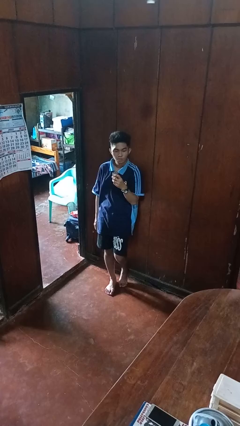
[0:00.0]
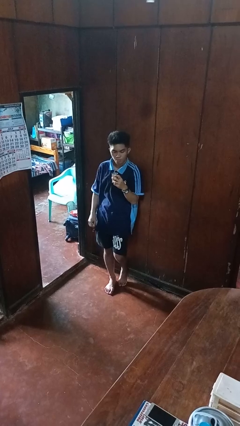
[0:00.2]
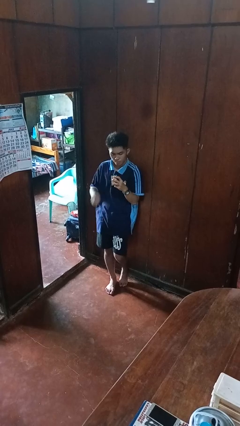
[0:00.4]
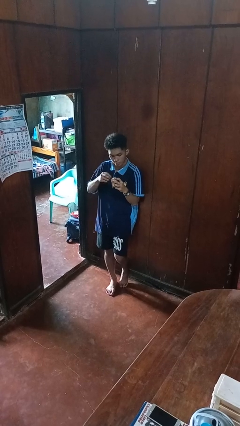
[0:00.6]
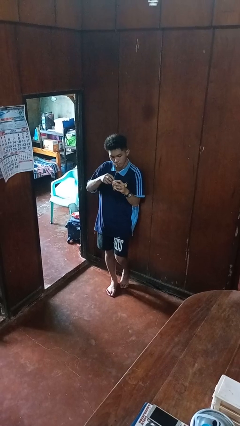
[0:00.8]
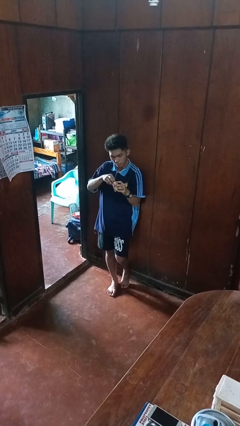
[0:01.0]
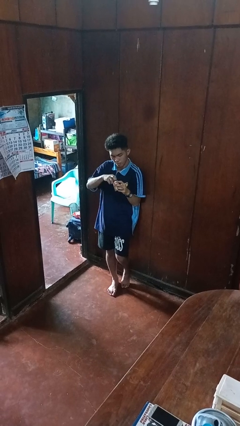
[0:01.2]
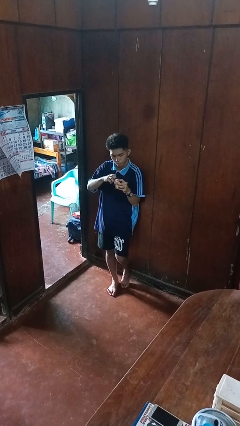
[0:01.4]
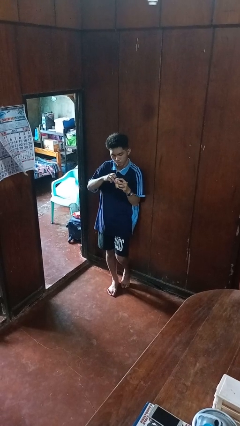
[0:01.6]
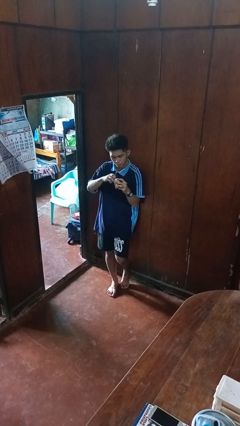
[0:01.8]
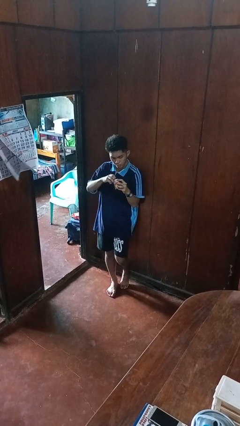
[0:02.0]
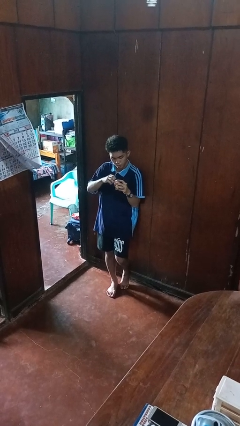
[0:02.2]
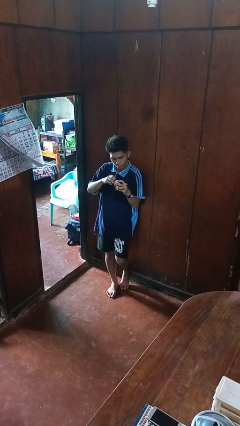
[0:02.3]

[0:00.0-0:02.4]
person opens beverage can

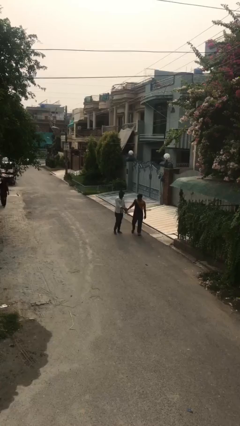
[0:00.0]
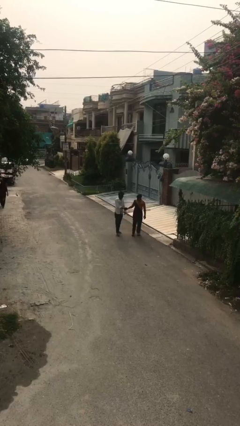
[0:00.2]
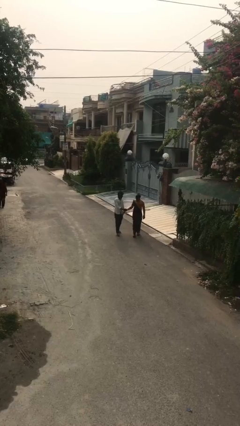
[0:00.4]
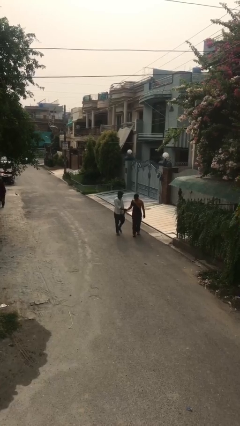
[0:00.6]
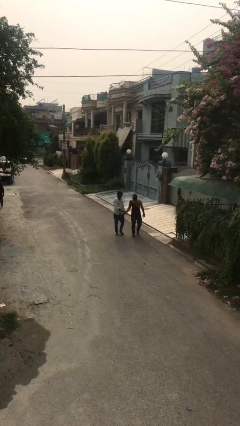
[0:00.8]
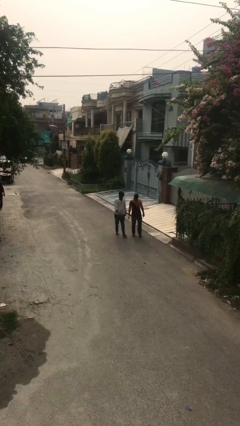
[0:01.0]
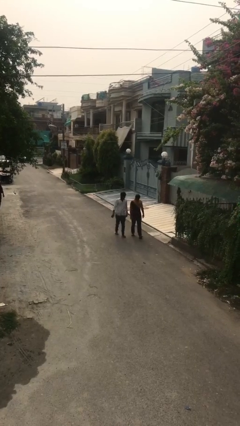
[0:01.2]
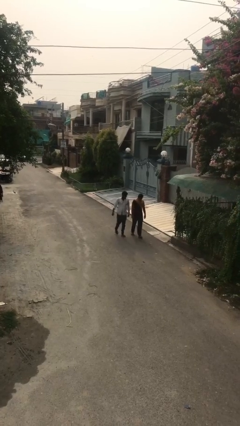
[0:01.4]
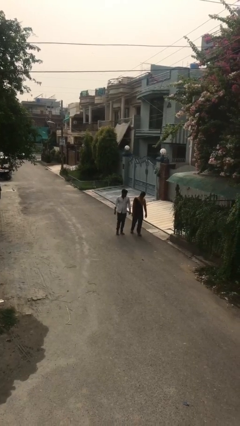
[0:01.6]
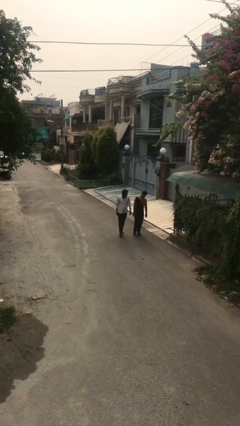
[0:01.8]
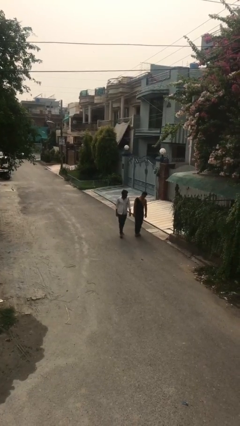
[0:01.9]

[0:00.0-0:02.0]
person shakes hand

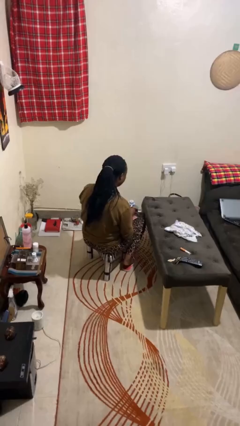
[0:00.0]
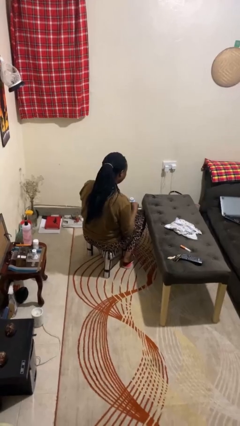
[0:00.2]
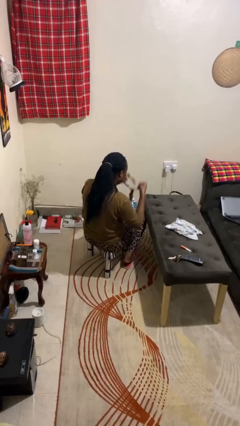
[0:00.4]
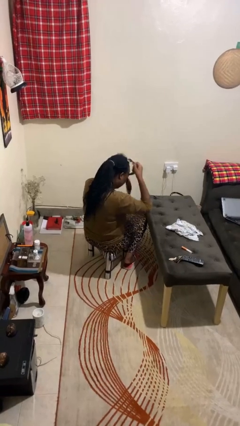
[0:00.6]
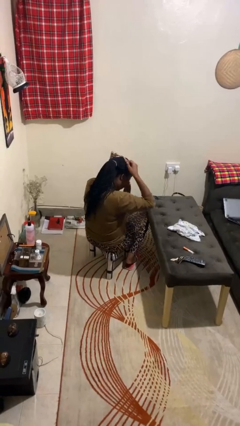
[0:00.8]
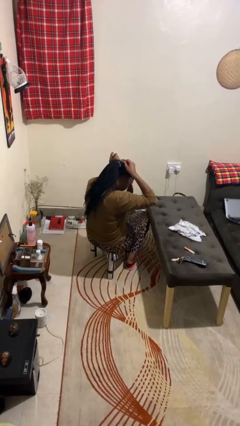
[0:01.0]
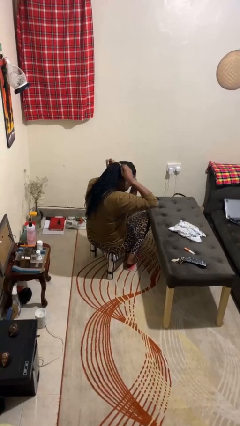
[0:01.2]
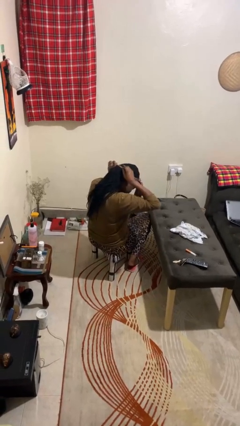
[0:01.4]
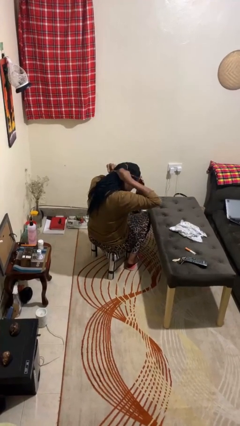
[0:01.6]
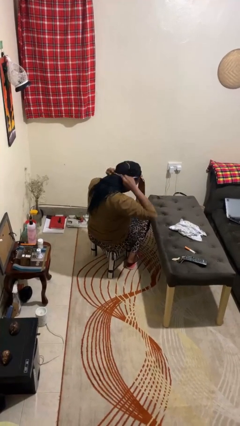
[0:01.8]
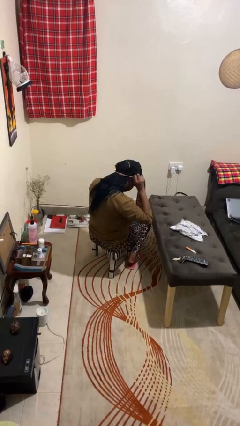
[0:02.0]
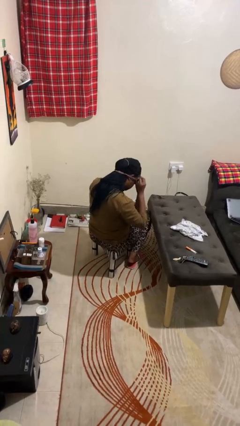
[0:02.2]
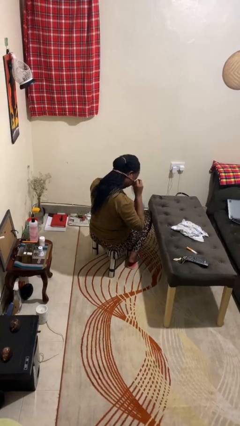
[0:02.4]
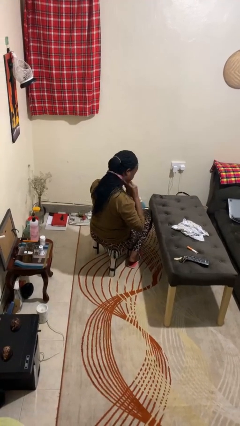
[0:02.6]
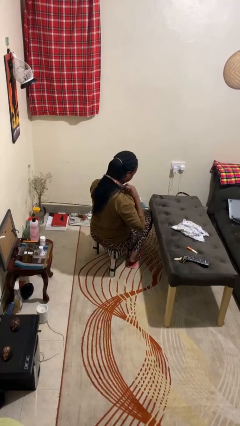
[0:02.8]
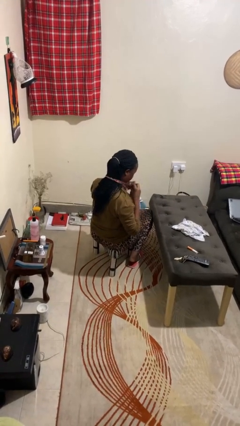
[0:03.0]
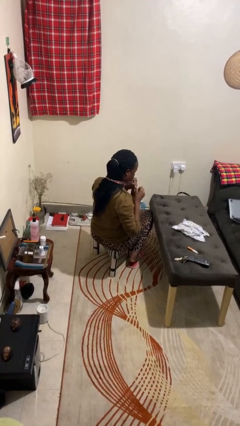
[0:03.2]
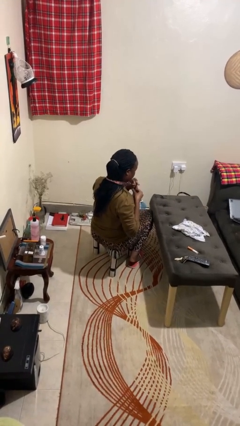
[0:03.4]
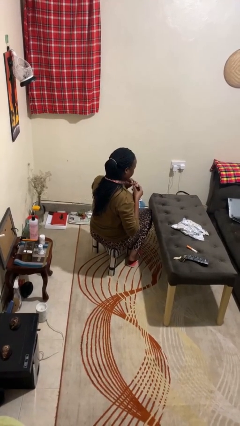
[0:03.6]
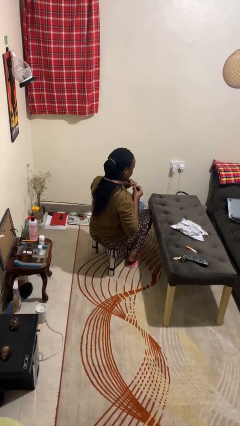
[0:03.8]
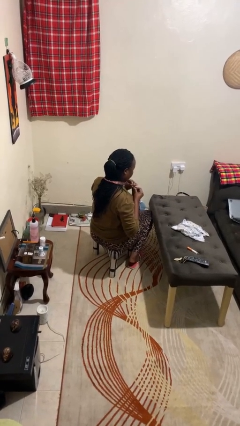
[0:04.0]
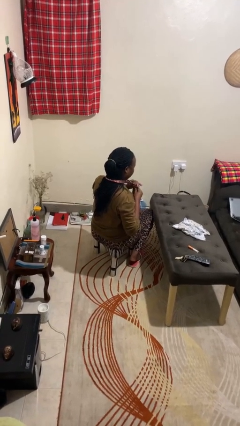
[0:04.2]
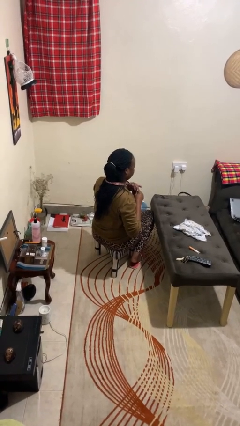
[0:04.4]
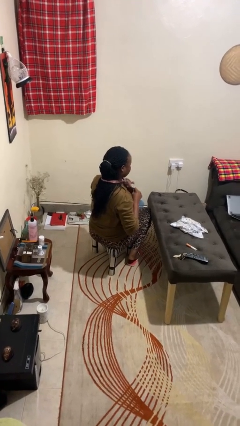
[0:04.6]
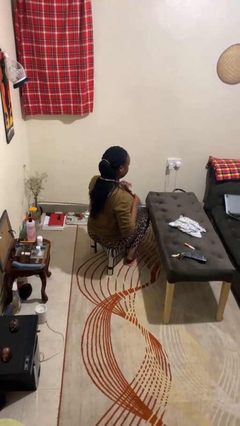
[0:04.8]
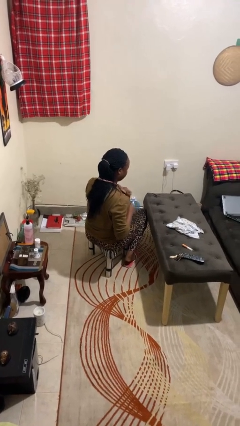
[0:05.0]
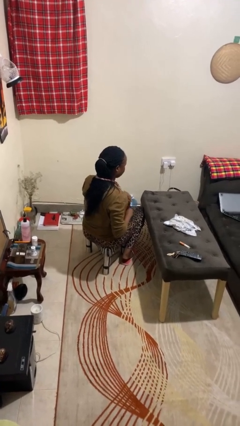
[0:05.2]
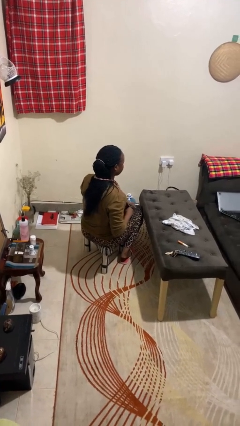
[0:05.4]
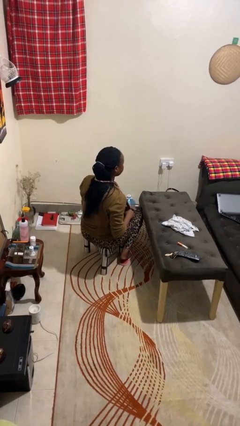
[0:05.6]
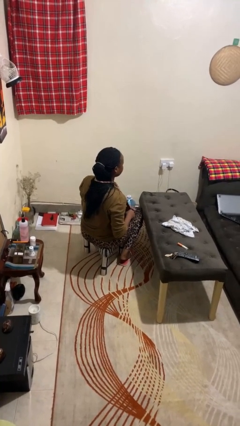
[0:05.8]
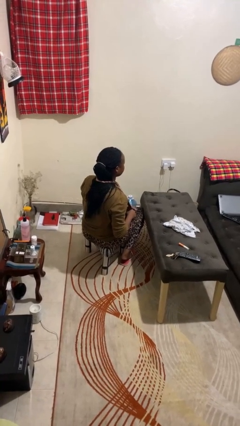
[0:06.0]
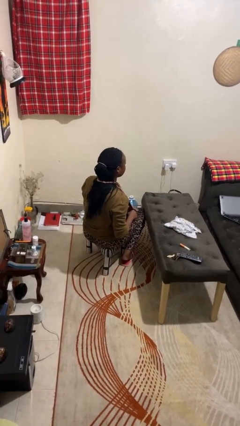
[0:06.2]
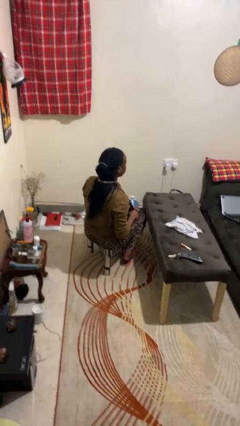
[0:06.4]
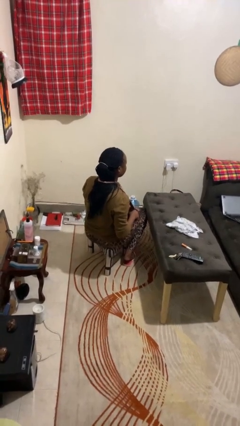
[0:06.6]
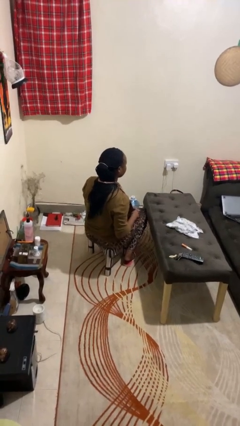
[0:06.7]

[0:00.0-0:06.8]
person puts on necktie

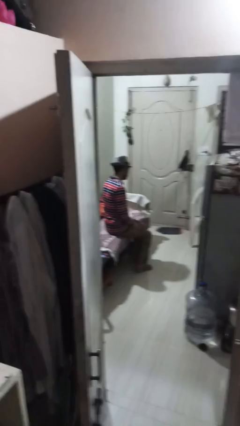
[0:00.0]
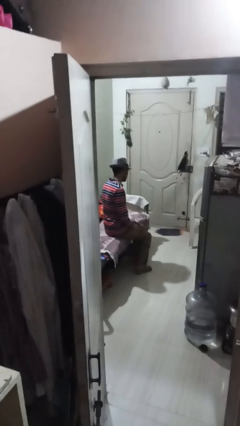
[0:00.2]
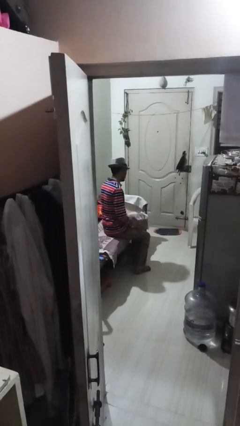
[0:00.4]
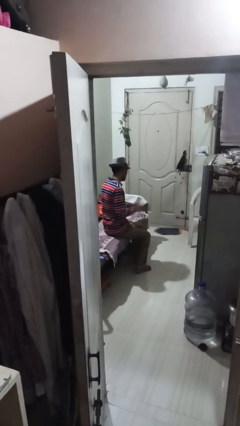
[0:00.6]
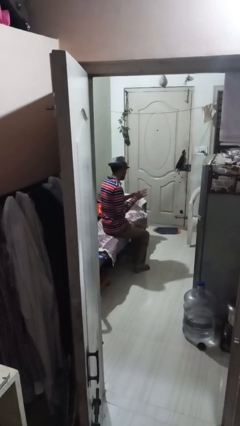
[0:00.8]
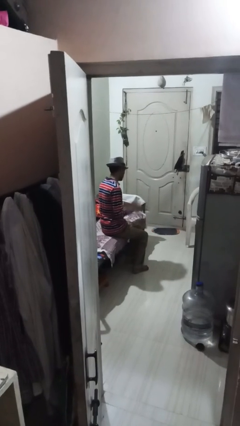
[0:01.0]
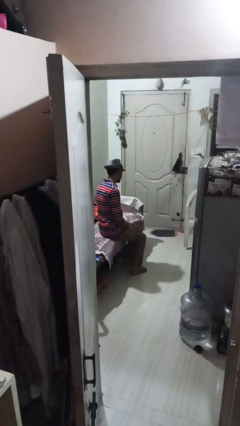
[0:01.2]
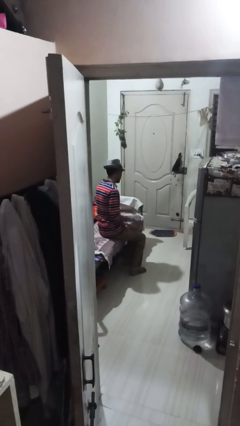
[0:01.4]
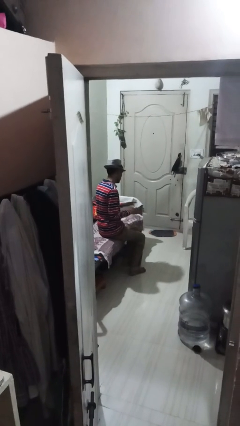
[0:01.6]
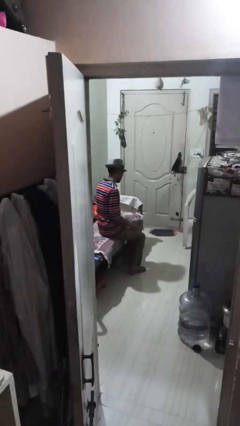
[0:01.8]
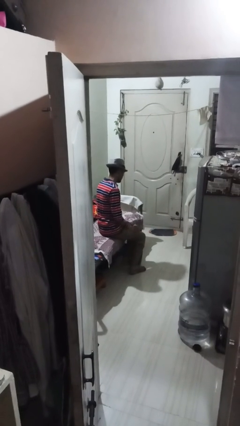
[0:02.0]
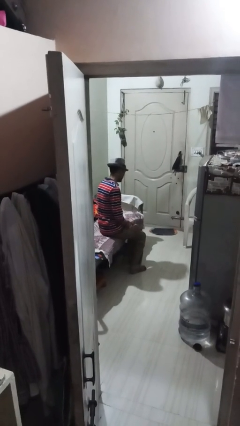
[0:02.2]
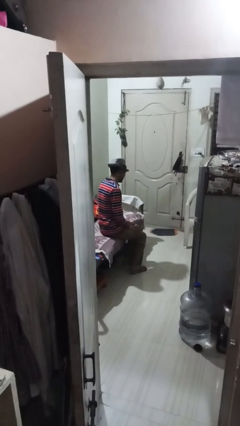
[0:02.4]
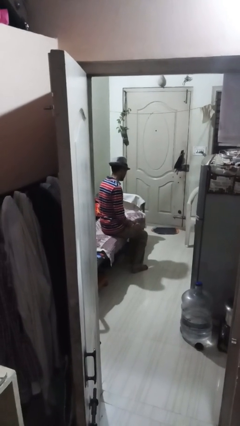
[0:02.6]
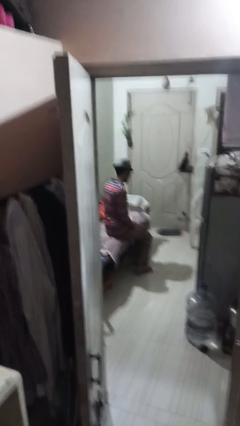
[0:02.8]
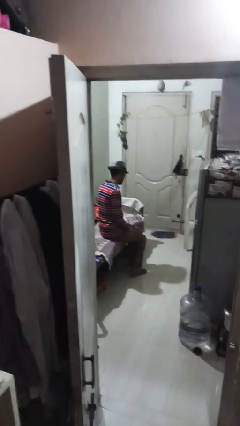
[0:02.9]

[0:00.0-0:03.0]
person slaps hands on thighs

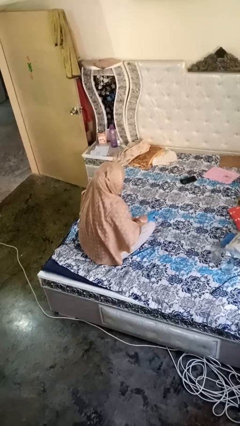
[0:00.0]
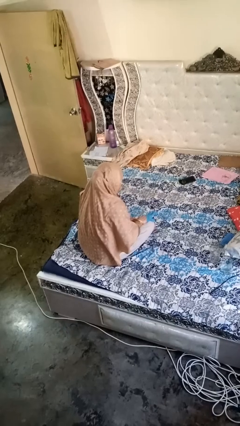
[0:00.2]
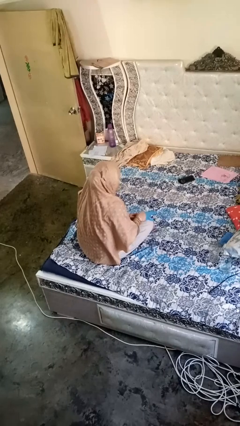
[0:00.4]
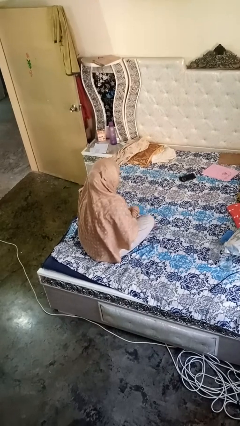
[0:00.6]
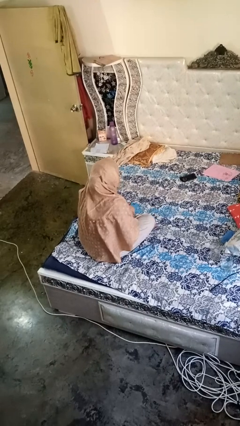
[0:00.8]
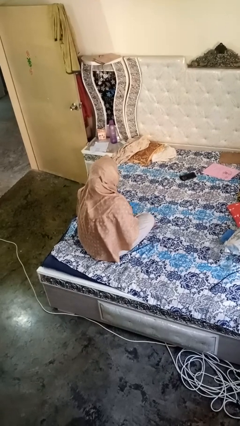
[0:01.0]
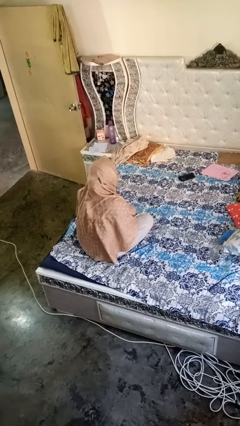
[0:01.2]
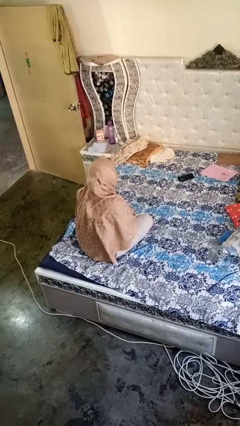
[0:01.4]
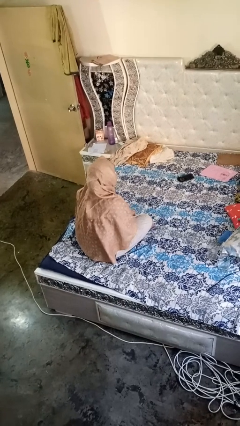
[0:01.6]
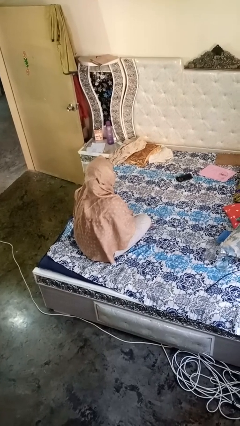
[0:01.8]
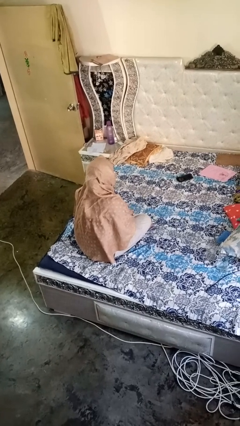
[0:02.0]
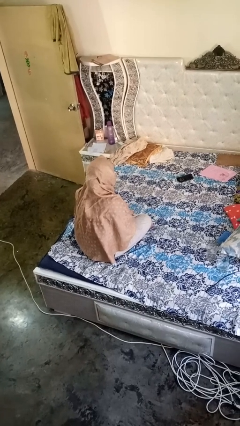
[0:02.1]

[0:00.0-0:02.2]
person takes off gloves

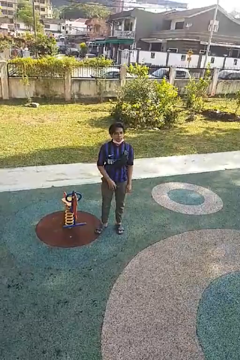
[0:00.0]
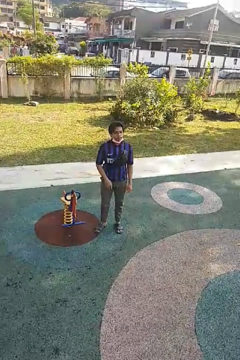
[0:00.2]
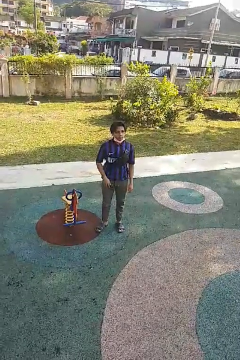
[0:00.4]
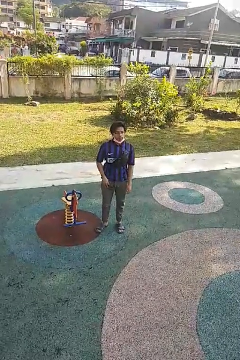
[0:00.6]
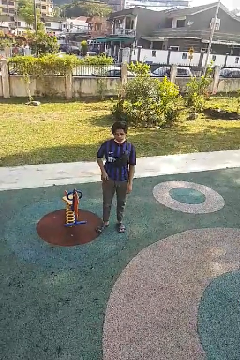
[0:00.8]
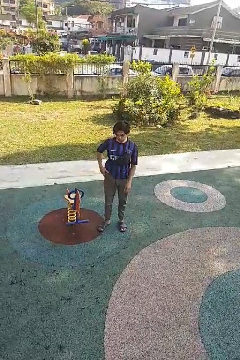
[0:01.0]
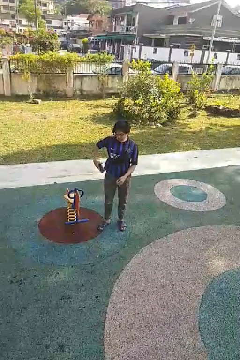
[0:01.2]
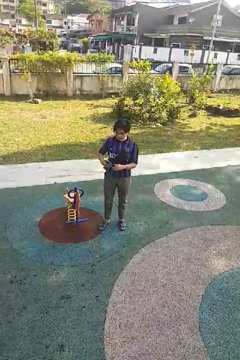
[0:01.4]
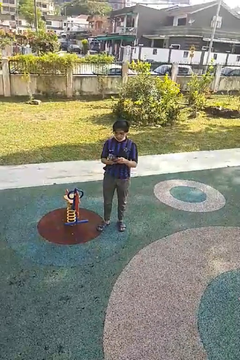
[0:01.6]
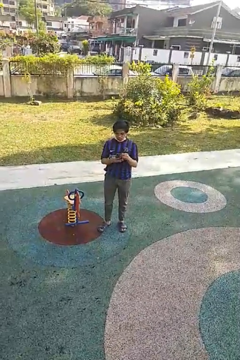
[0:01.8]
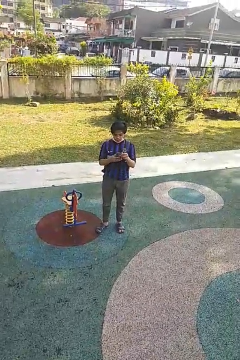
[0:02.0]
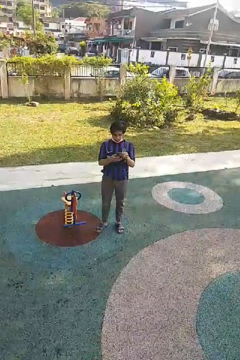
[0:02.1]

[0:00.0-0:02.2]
person takes phone from pocket
